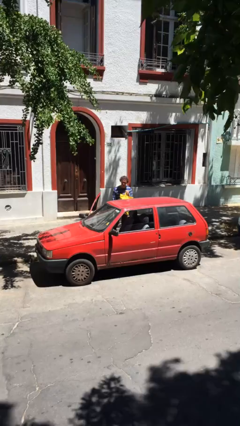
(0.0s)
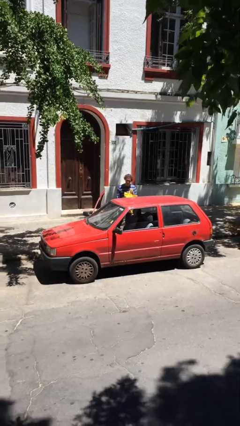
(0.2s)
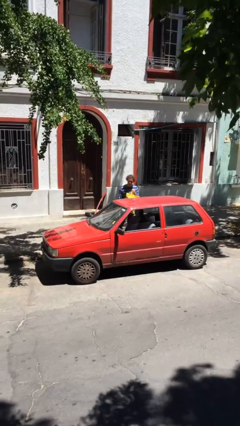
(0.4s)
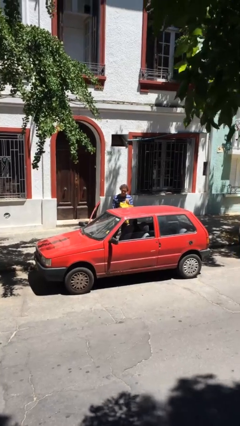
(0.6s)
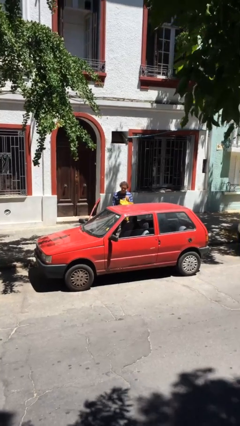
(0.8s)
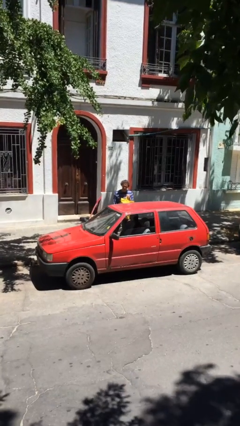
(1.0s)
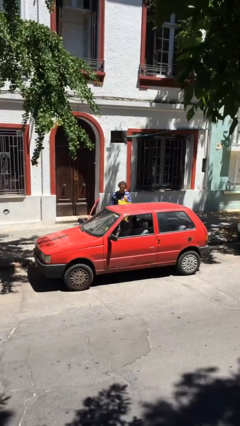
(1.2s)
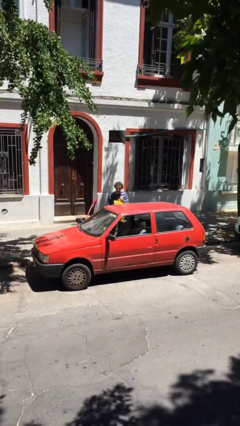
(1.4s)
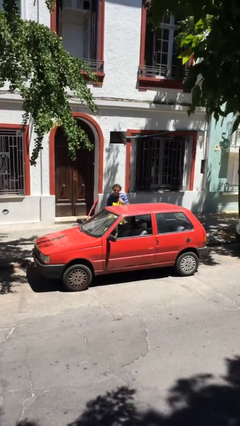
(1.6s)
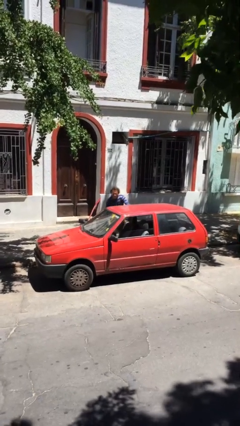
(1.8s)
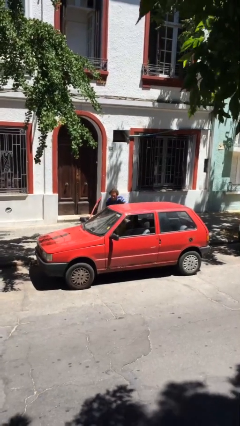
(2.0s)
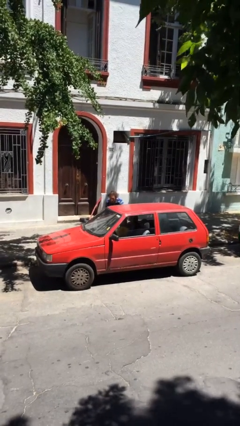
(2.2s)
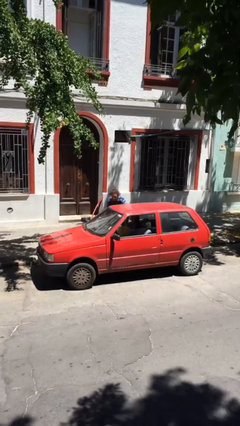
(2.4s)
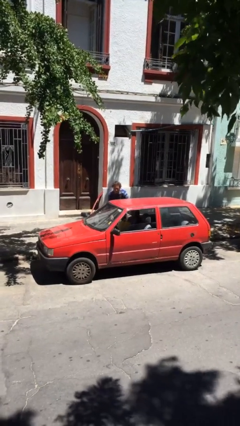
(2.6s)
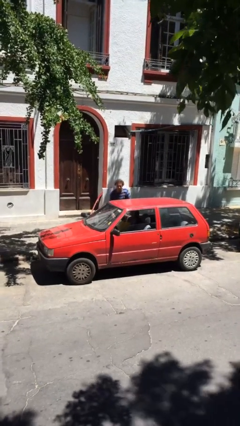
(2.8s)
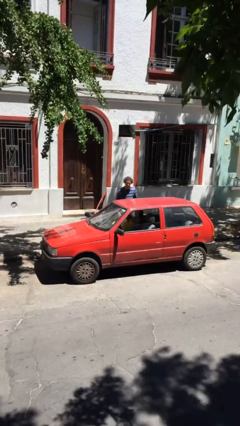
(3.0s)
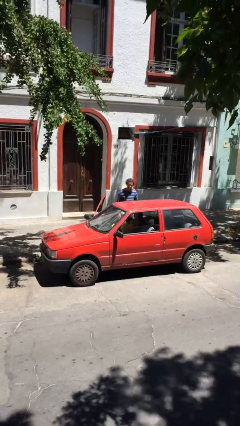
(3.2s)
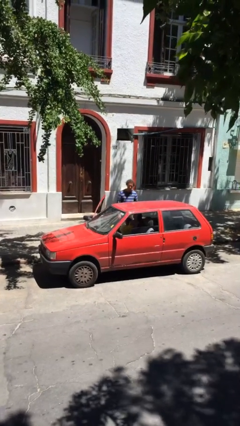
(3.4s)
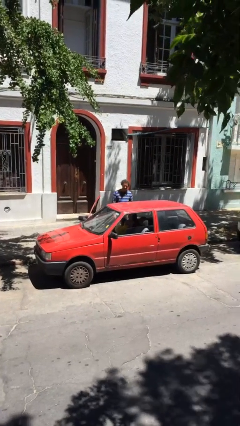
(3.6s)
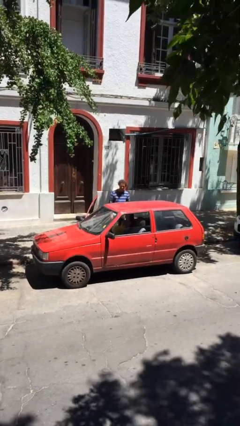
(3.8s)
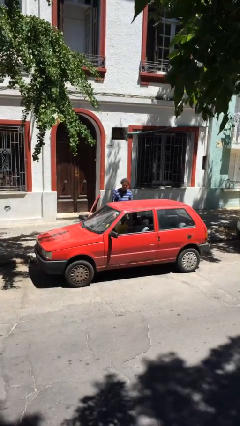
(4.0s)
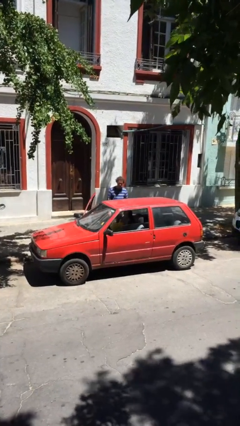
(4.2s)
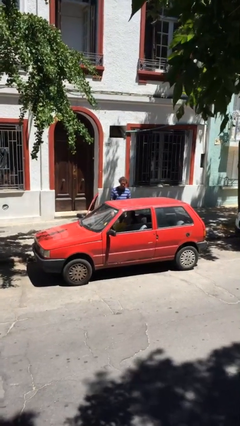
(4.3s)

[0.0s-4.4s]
person loads car

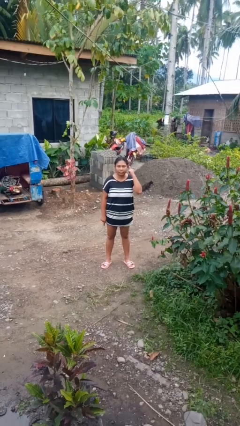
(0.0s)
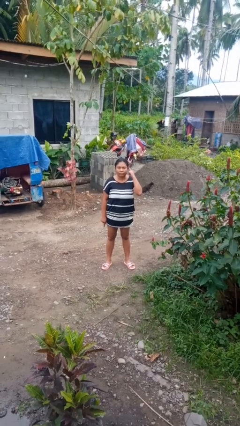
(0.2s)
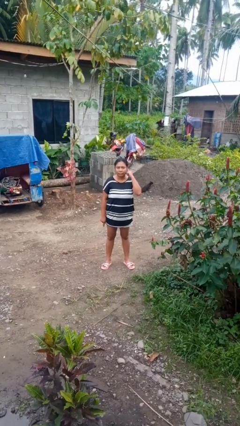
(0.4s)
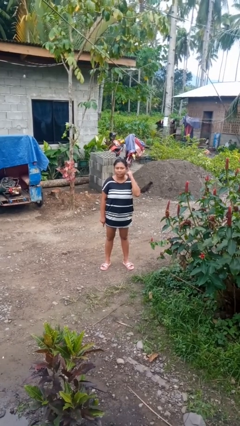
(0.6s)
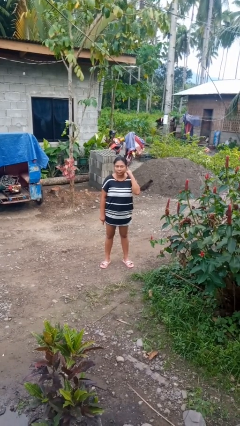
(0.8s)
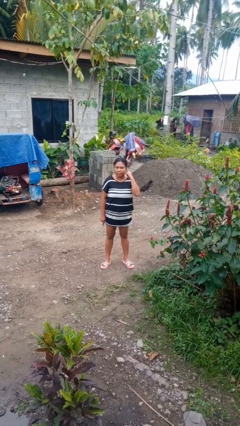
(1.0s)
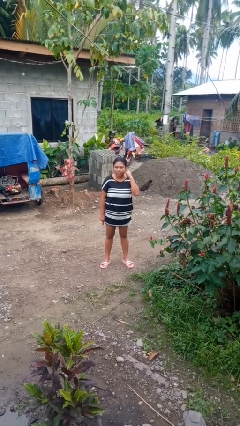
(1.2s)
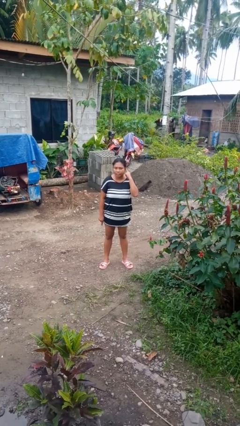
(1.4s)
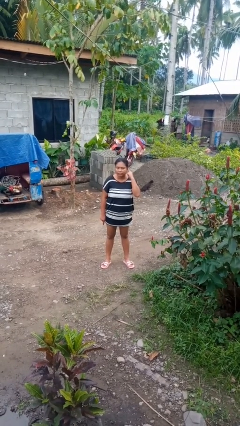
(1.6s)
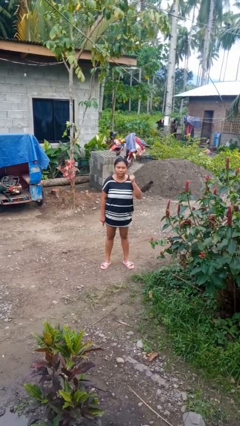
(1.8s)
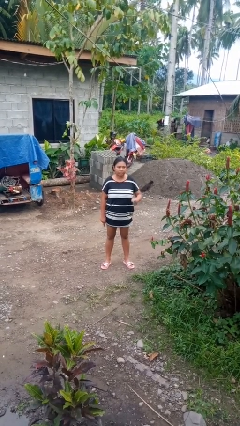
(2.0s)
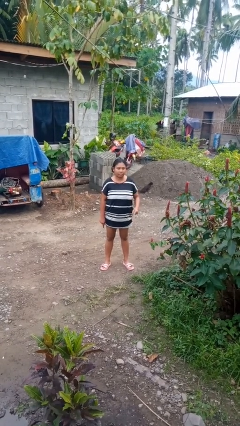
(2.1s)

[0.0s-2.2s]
person gestures listen closely

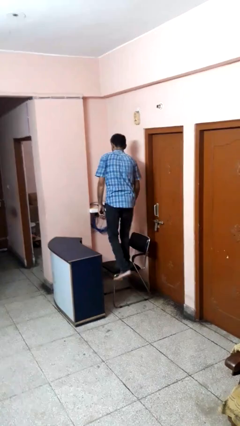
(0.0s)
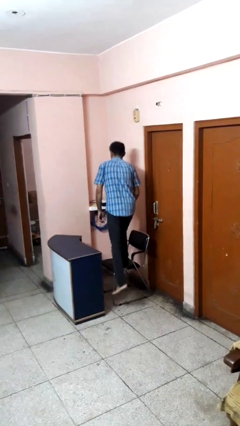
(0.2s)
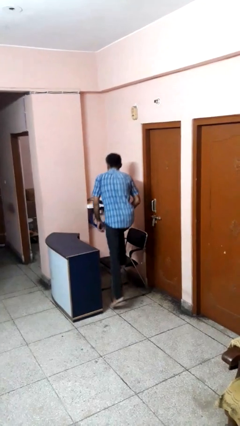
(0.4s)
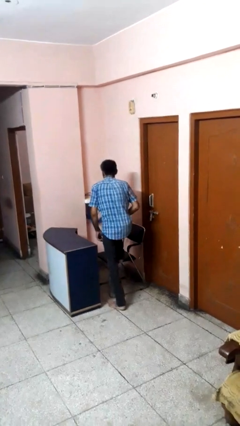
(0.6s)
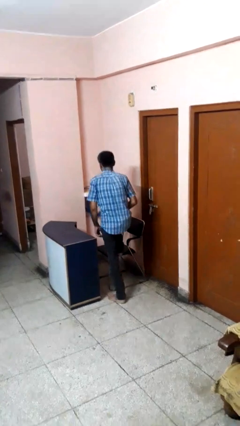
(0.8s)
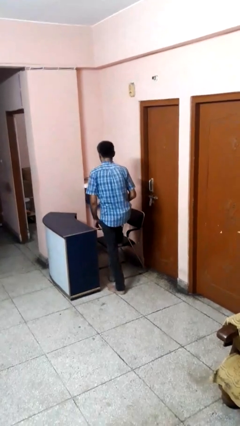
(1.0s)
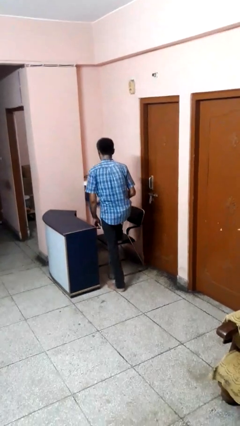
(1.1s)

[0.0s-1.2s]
person climbs off chair

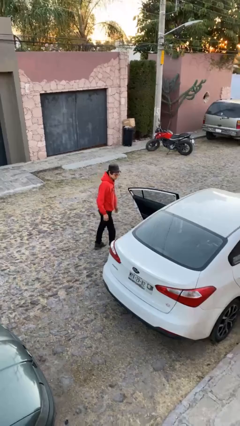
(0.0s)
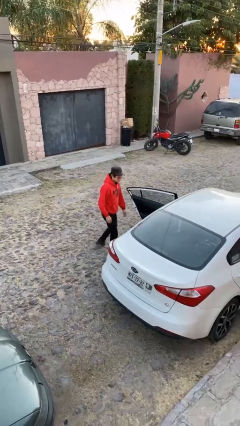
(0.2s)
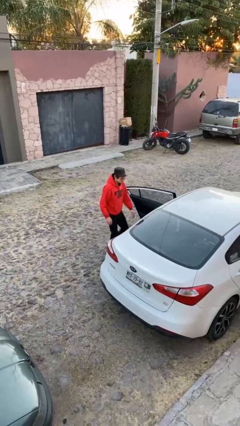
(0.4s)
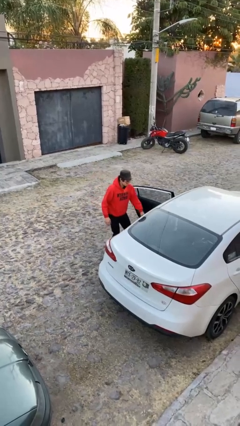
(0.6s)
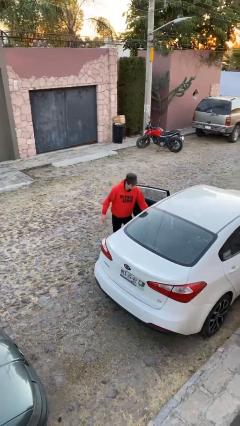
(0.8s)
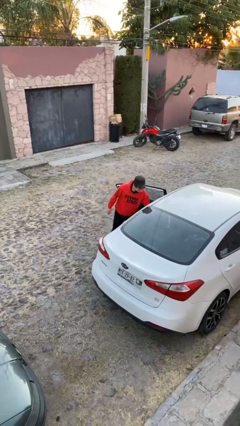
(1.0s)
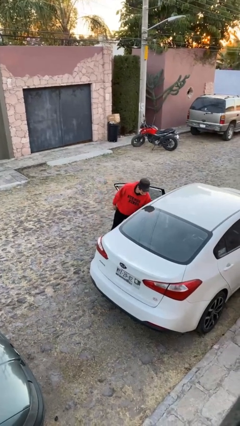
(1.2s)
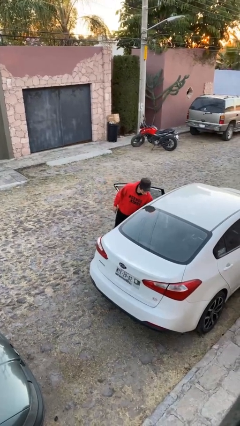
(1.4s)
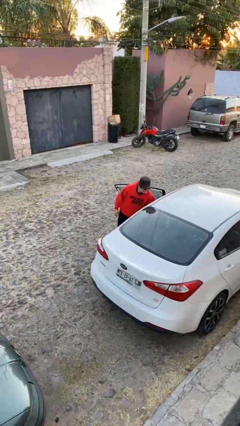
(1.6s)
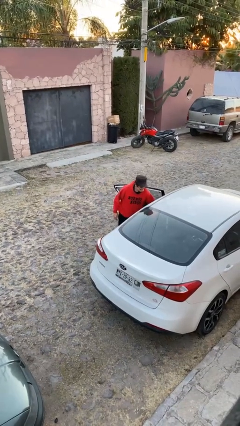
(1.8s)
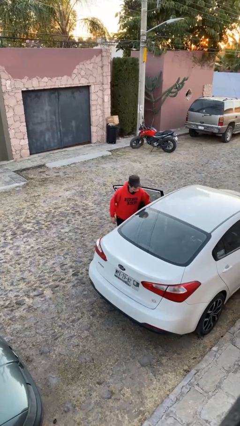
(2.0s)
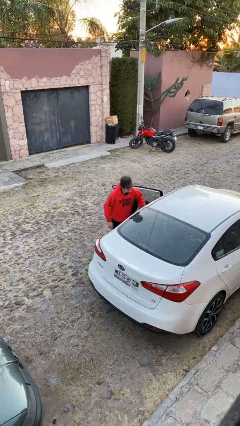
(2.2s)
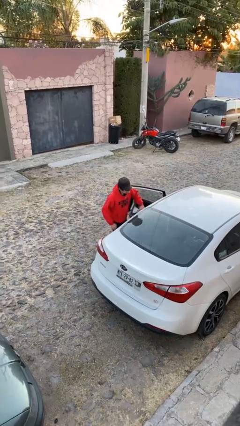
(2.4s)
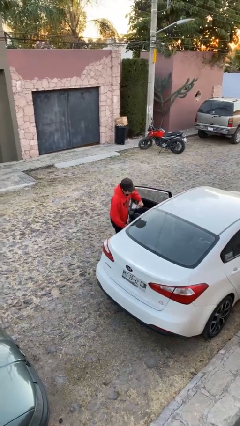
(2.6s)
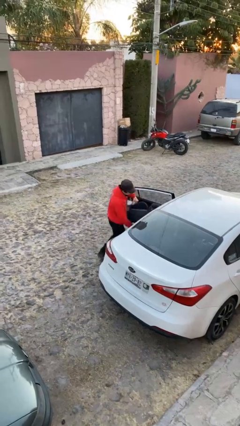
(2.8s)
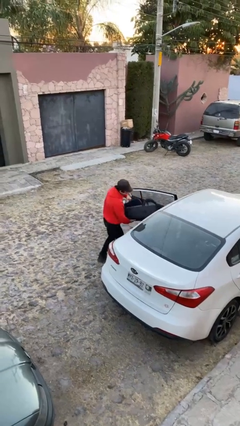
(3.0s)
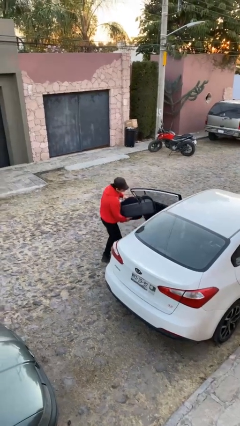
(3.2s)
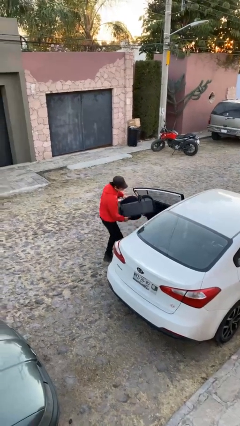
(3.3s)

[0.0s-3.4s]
person unloads car

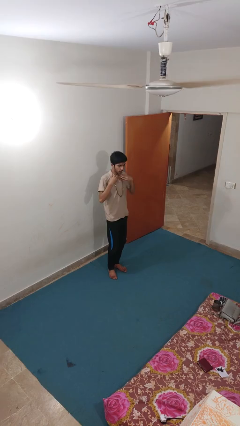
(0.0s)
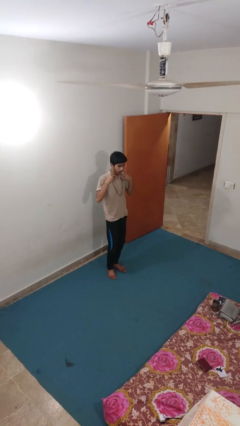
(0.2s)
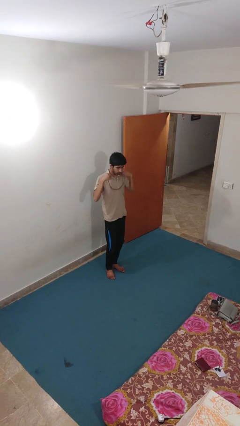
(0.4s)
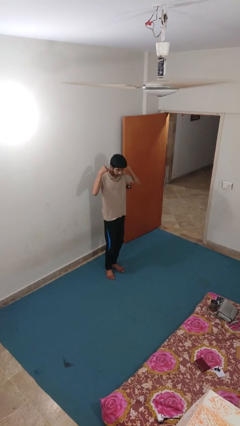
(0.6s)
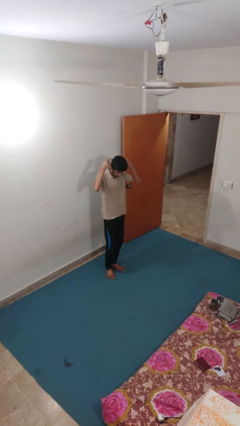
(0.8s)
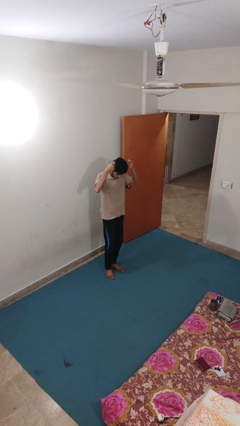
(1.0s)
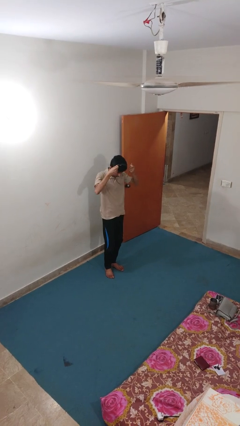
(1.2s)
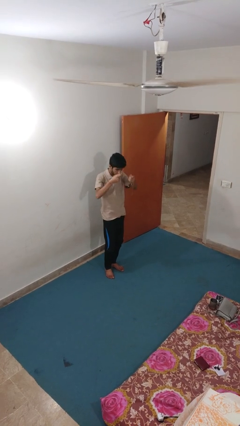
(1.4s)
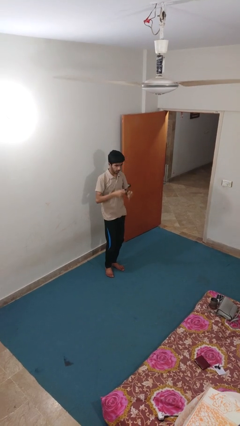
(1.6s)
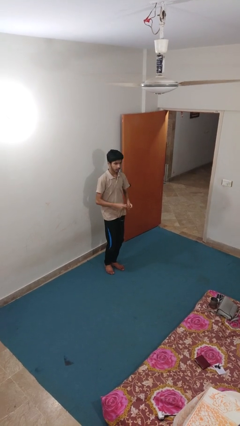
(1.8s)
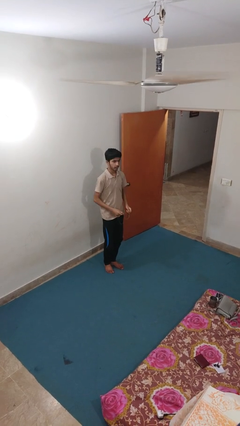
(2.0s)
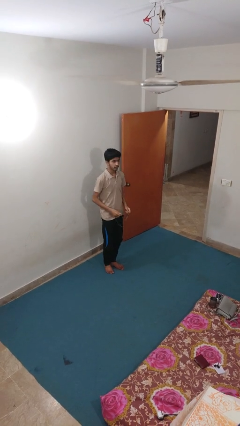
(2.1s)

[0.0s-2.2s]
person takes off necklace

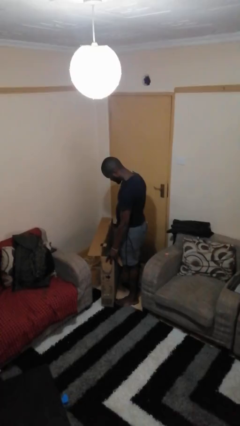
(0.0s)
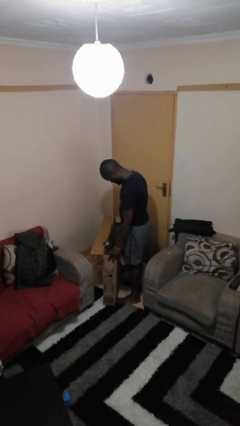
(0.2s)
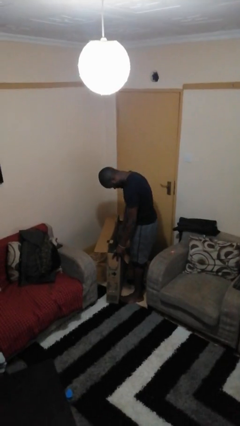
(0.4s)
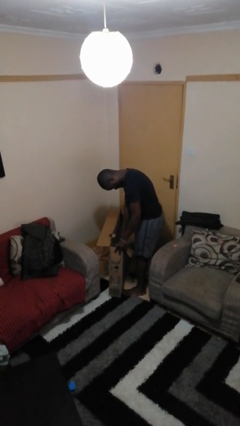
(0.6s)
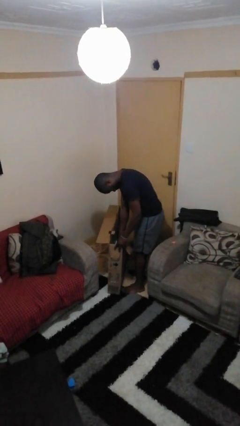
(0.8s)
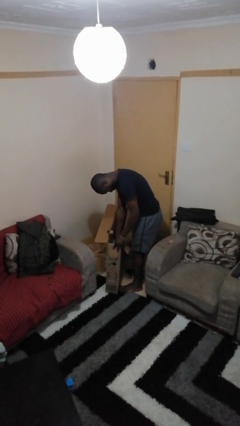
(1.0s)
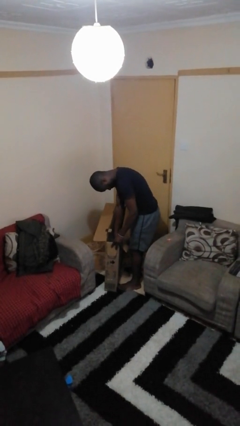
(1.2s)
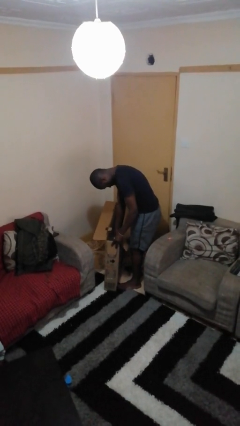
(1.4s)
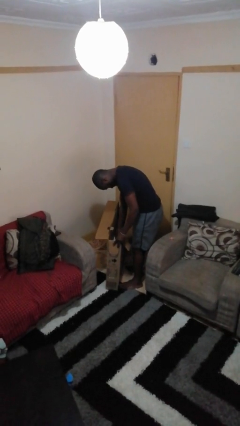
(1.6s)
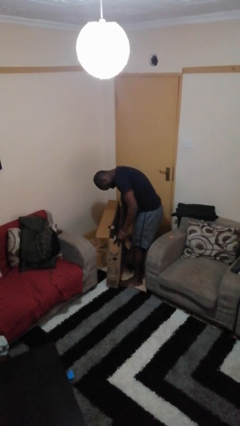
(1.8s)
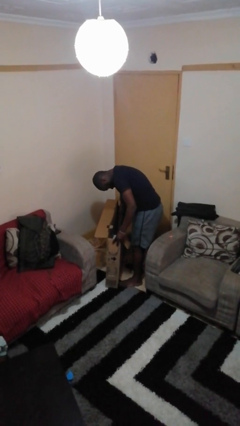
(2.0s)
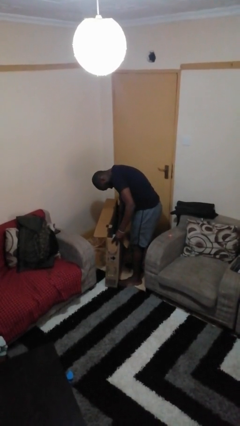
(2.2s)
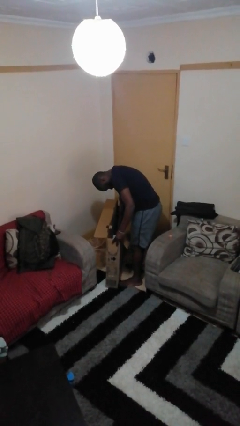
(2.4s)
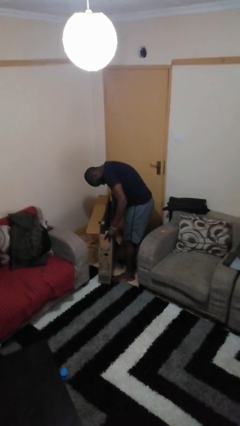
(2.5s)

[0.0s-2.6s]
person searches in box

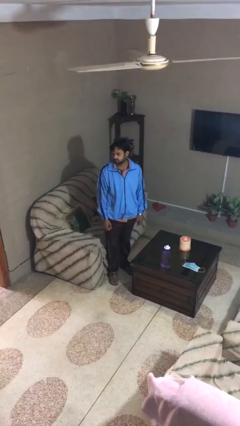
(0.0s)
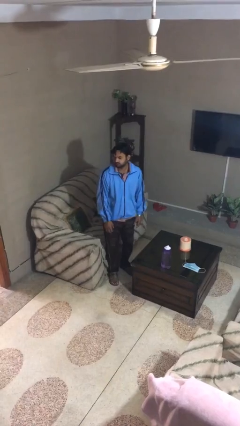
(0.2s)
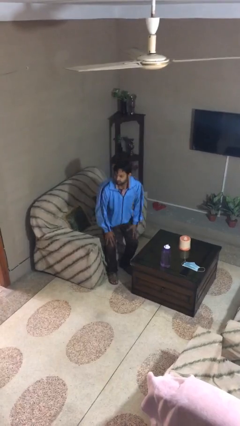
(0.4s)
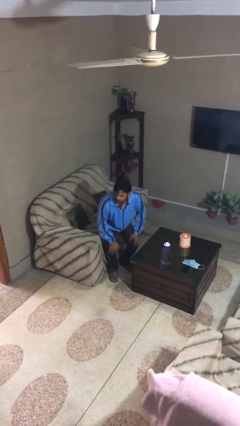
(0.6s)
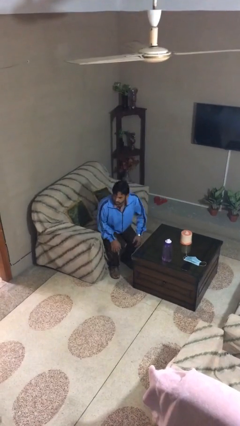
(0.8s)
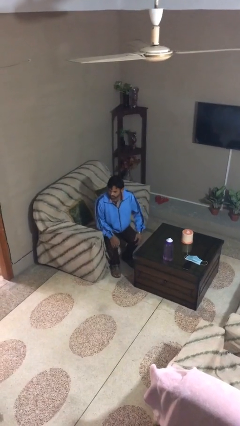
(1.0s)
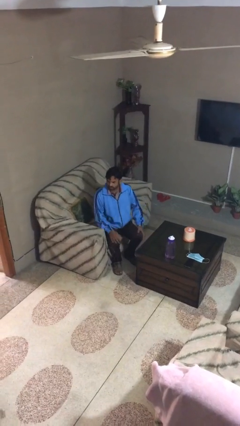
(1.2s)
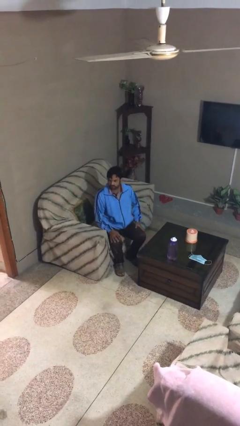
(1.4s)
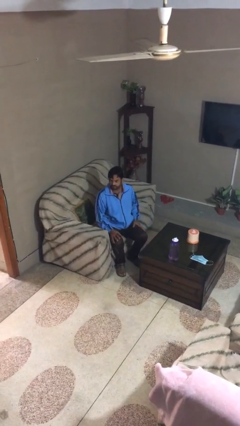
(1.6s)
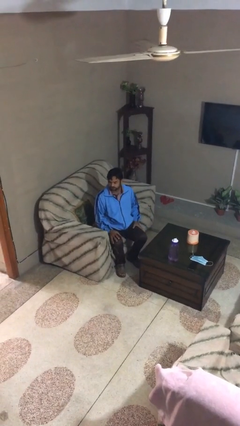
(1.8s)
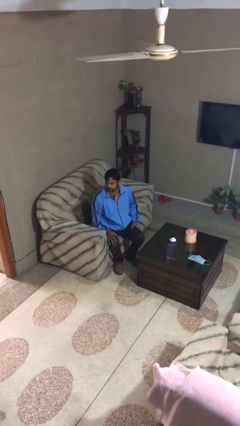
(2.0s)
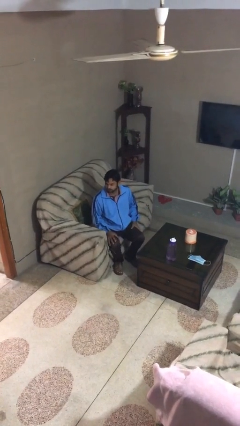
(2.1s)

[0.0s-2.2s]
person sits down
